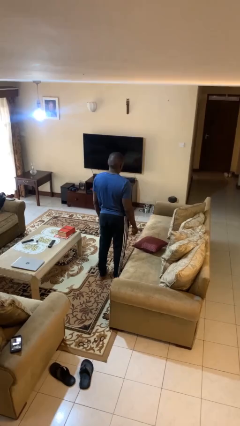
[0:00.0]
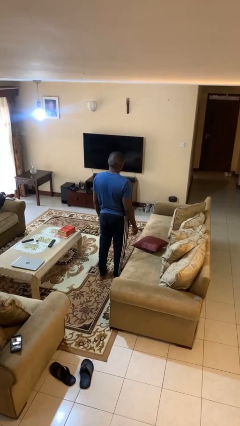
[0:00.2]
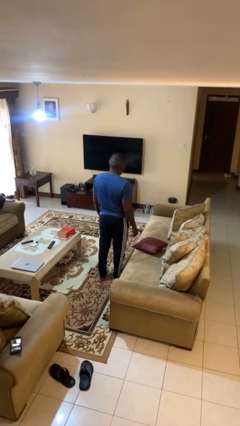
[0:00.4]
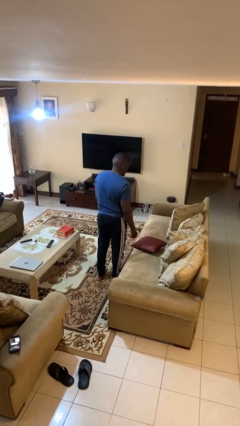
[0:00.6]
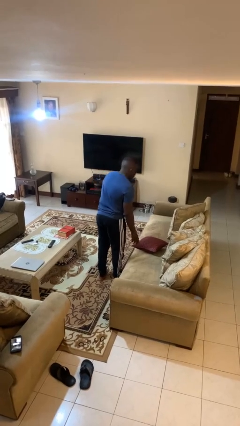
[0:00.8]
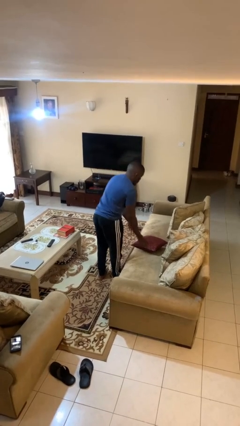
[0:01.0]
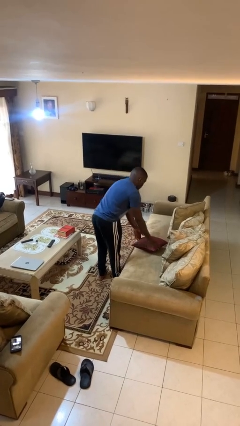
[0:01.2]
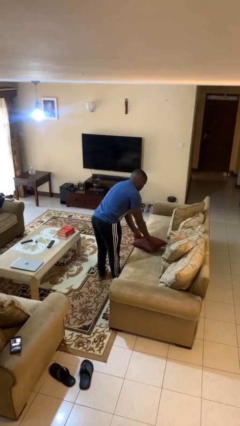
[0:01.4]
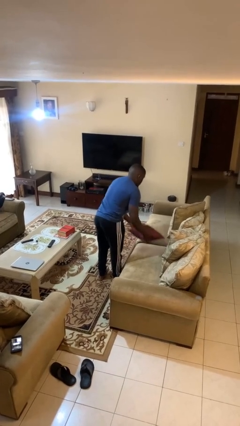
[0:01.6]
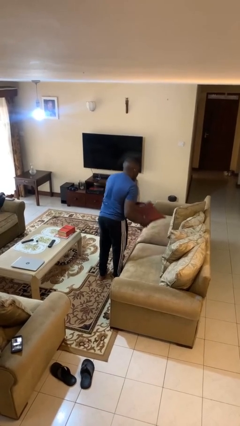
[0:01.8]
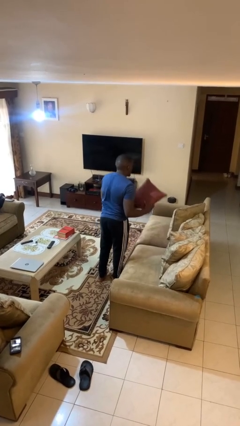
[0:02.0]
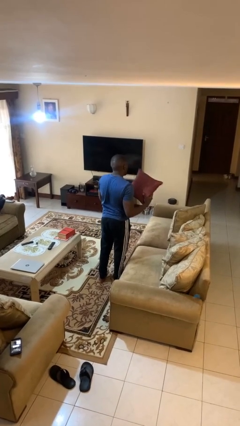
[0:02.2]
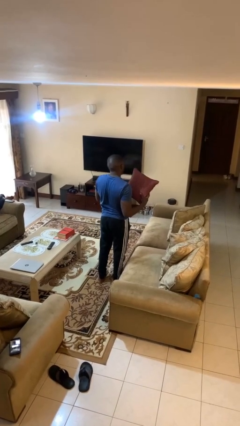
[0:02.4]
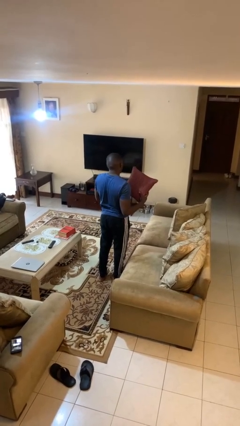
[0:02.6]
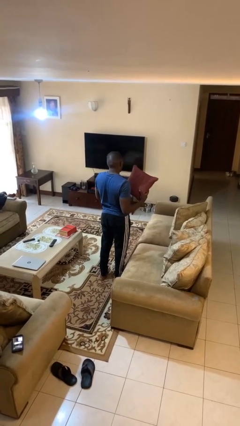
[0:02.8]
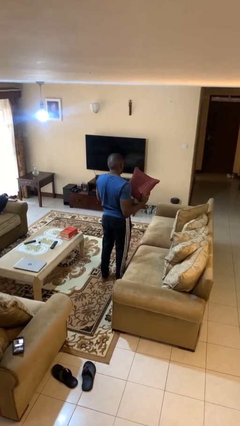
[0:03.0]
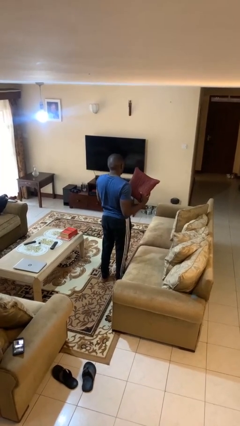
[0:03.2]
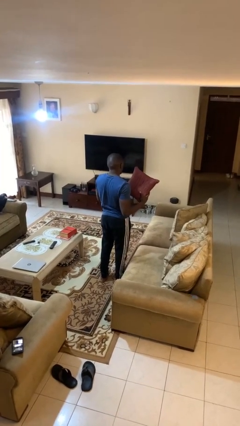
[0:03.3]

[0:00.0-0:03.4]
person picks up object from couch

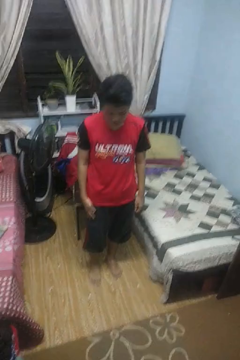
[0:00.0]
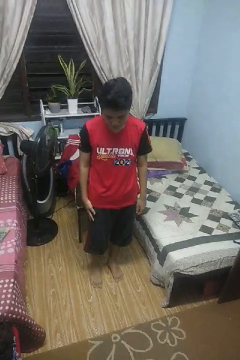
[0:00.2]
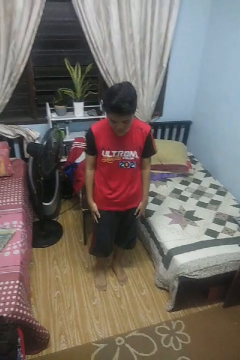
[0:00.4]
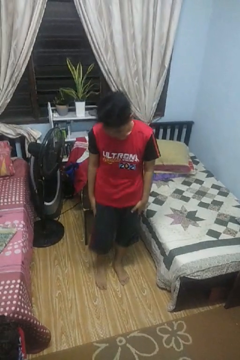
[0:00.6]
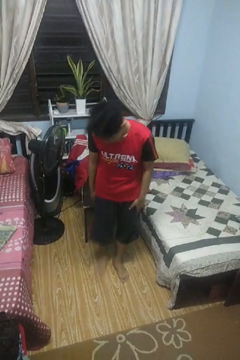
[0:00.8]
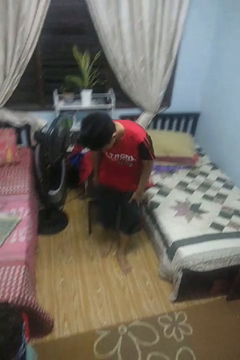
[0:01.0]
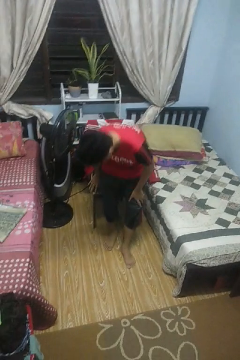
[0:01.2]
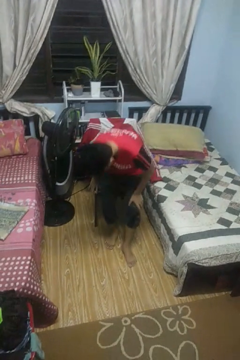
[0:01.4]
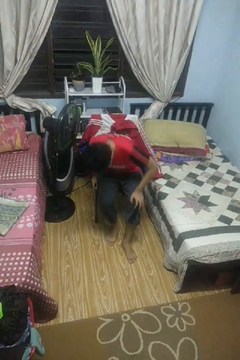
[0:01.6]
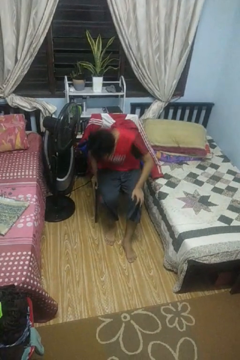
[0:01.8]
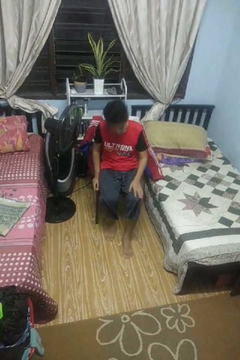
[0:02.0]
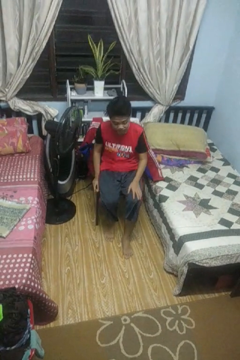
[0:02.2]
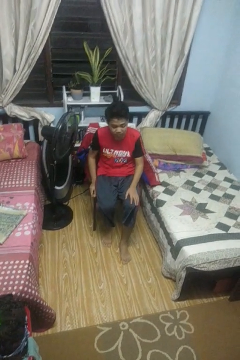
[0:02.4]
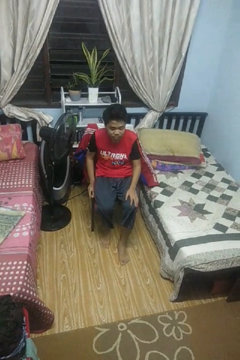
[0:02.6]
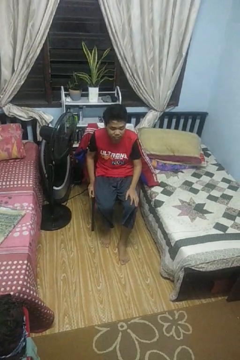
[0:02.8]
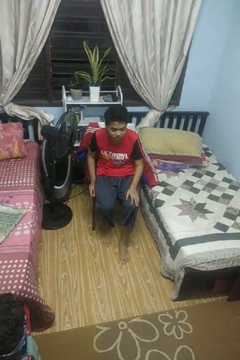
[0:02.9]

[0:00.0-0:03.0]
person sits down

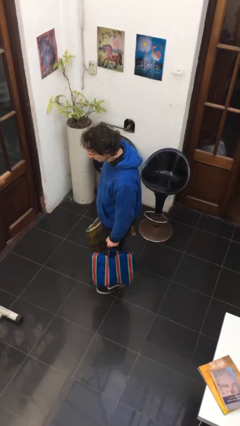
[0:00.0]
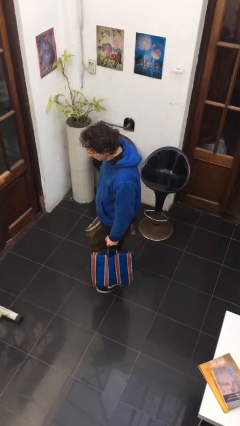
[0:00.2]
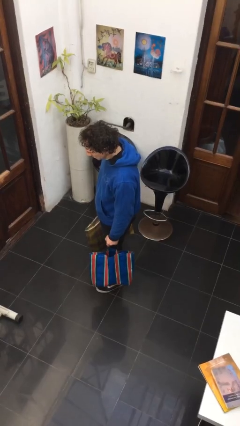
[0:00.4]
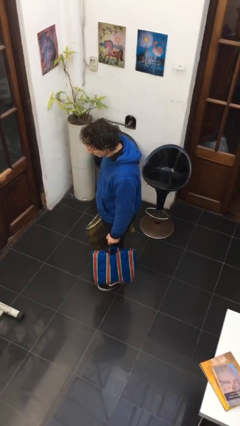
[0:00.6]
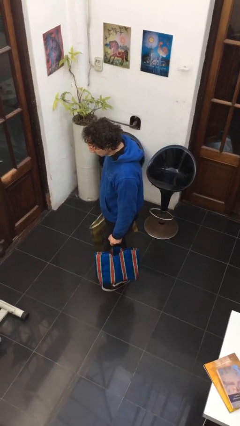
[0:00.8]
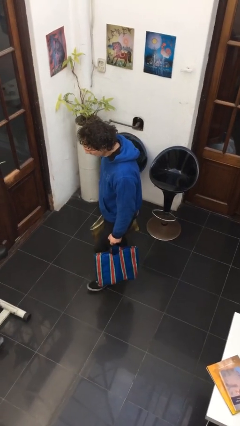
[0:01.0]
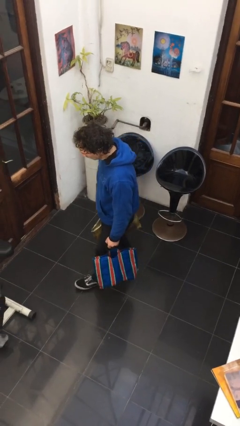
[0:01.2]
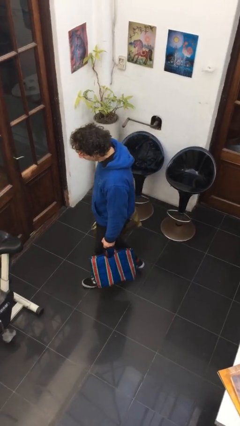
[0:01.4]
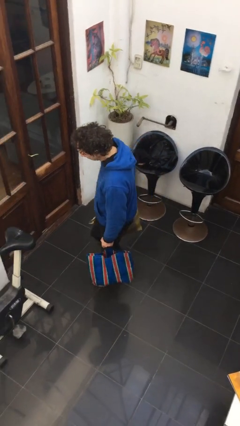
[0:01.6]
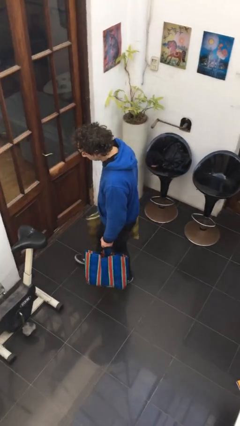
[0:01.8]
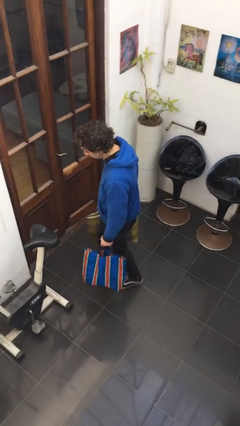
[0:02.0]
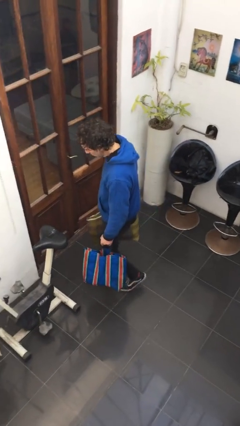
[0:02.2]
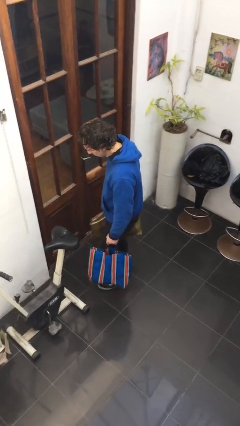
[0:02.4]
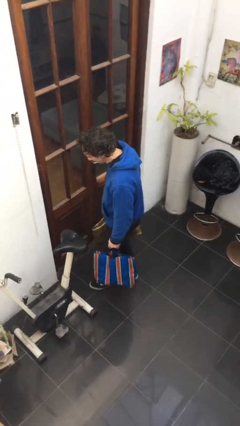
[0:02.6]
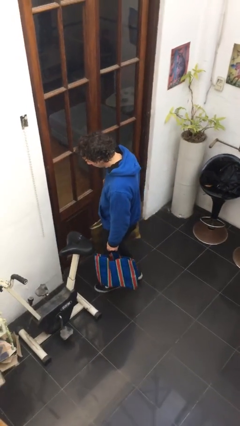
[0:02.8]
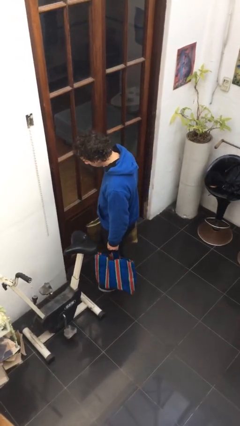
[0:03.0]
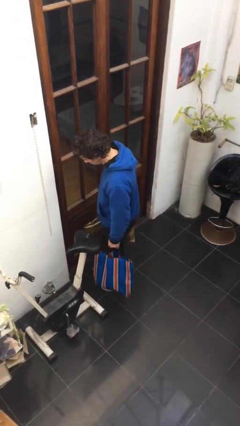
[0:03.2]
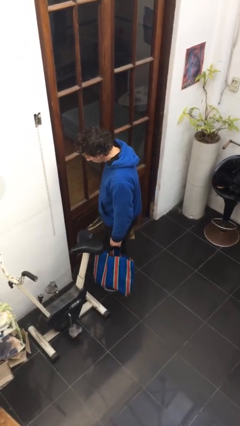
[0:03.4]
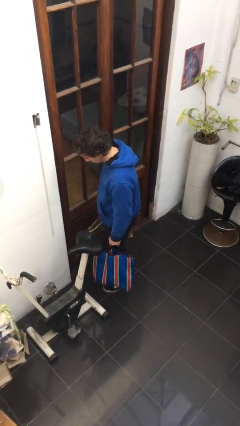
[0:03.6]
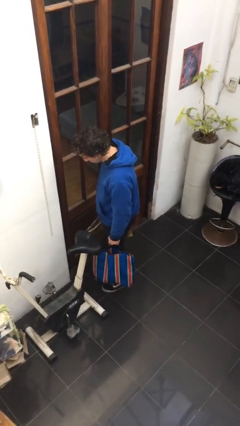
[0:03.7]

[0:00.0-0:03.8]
person carries groceries

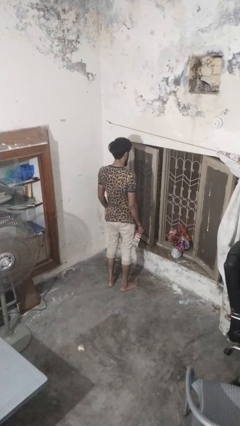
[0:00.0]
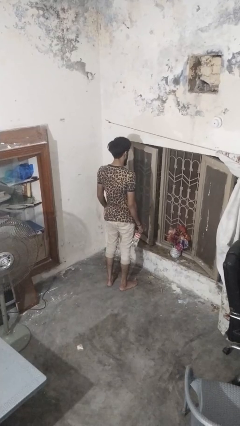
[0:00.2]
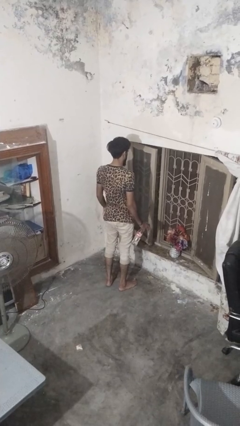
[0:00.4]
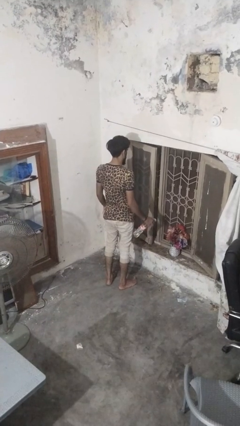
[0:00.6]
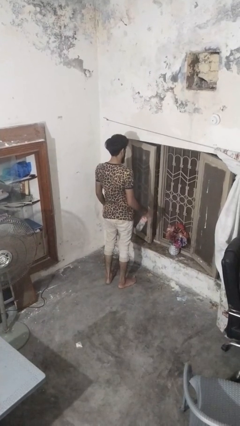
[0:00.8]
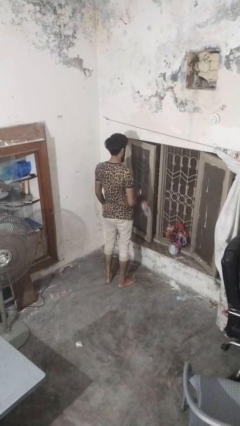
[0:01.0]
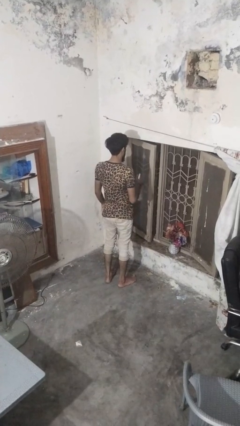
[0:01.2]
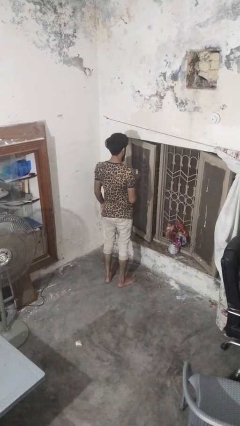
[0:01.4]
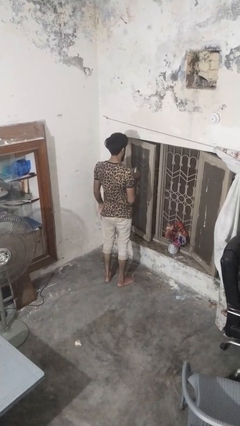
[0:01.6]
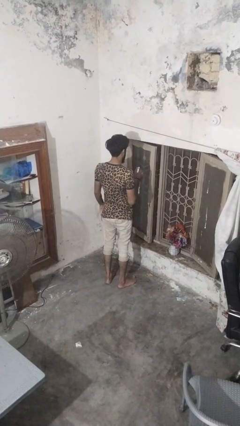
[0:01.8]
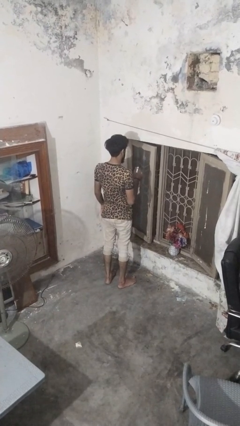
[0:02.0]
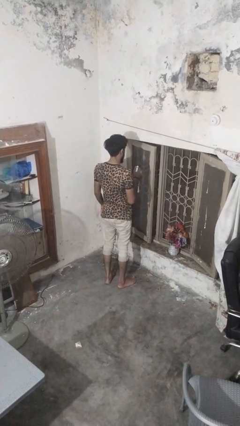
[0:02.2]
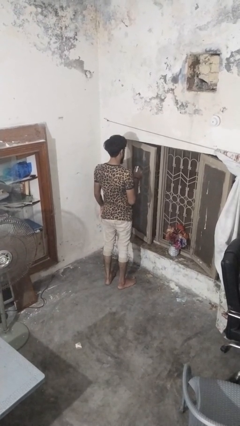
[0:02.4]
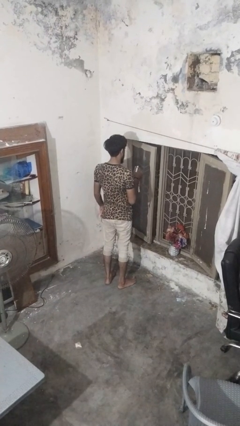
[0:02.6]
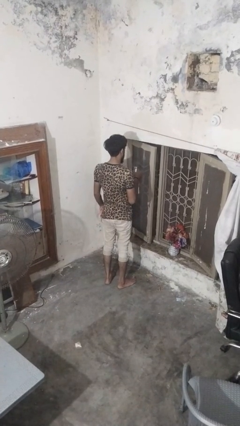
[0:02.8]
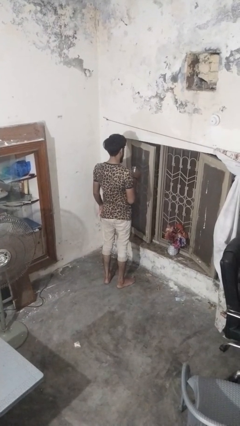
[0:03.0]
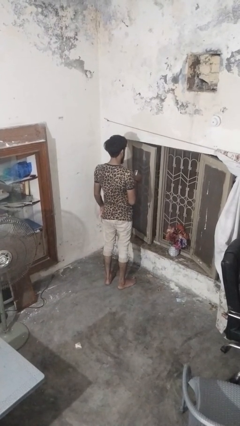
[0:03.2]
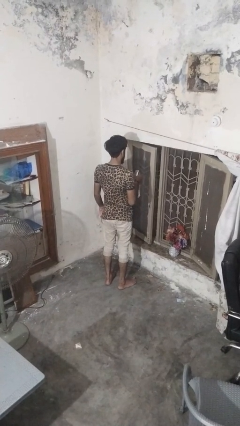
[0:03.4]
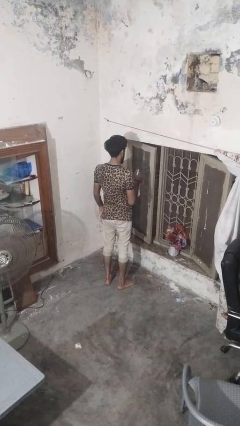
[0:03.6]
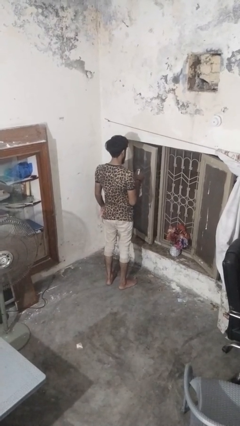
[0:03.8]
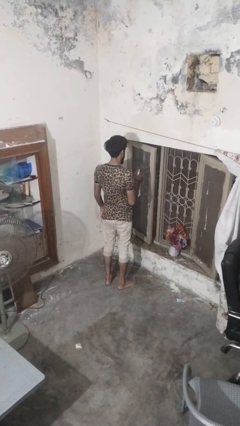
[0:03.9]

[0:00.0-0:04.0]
person sprays from bottle

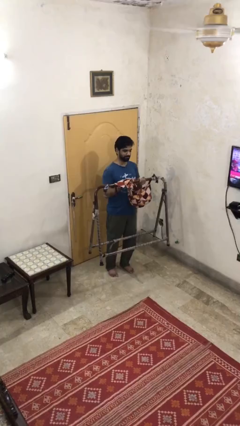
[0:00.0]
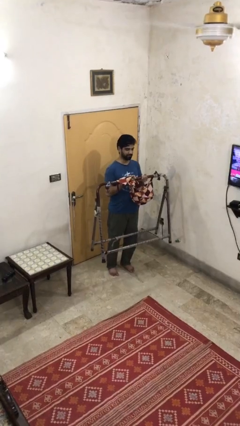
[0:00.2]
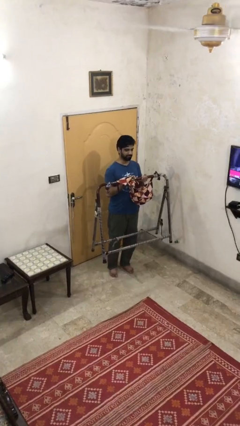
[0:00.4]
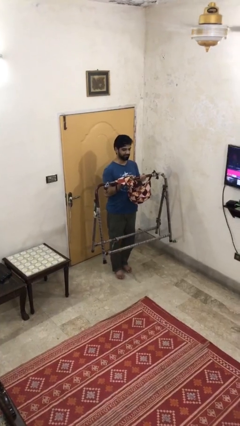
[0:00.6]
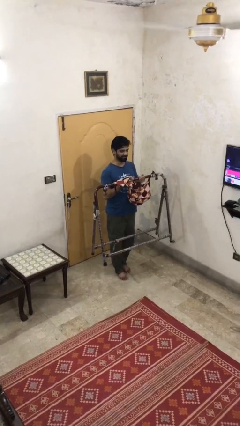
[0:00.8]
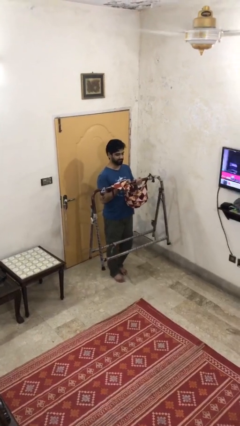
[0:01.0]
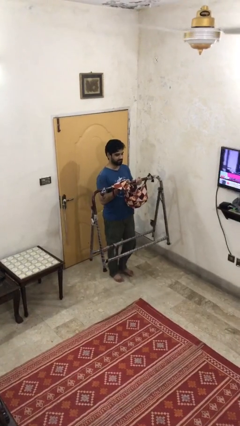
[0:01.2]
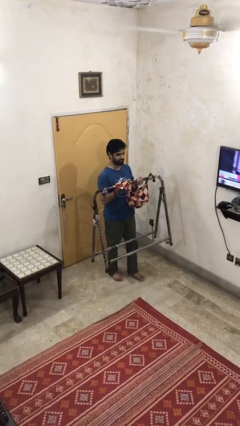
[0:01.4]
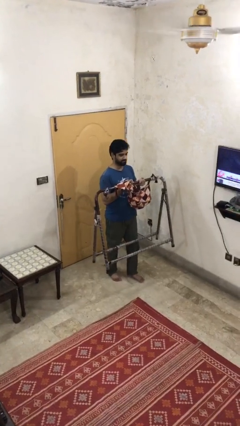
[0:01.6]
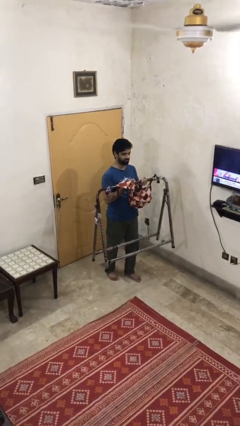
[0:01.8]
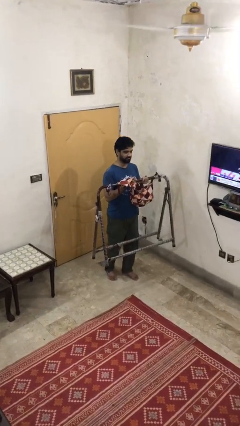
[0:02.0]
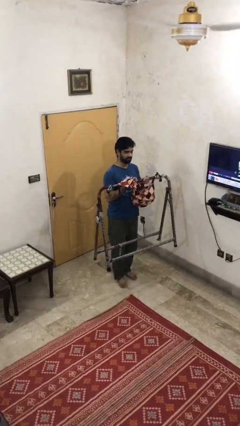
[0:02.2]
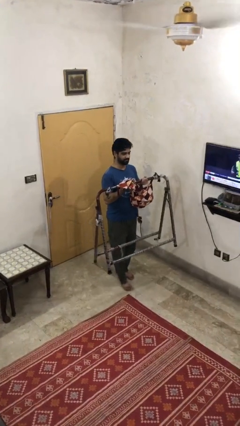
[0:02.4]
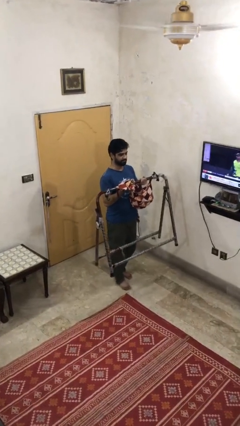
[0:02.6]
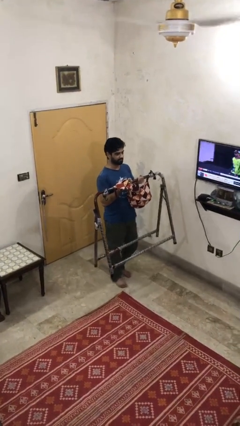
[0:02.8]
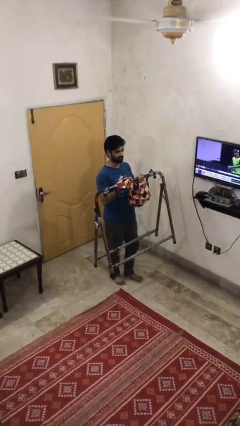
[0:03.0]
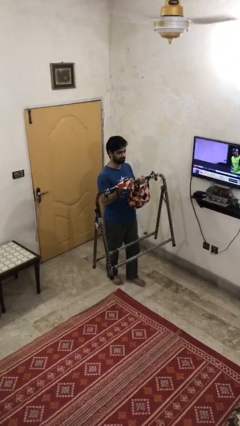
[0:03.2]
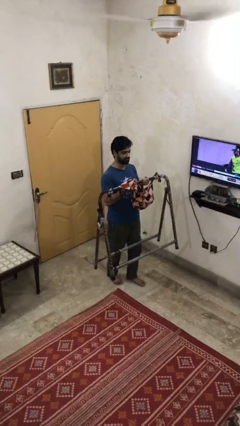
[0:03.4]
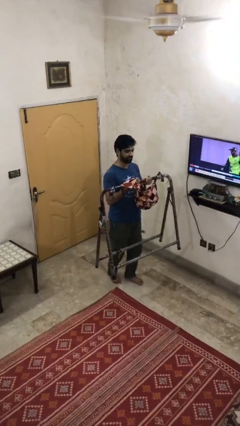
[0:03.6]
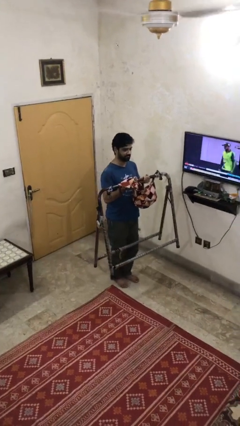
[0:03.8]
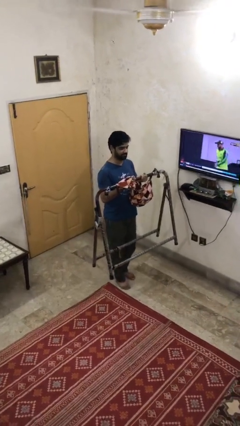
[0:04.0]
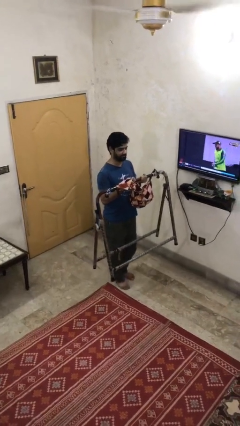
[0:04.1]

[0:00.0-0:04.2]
person carries heavy object

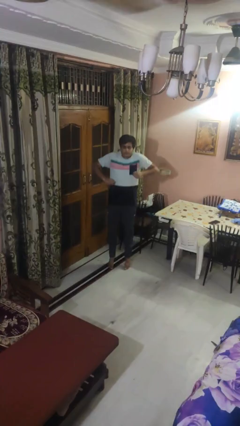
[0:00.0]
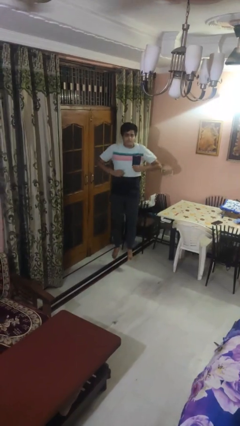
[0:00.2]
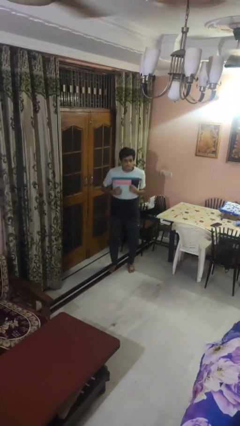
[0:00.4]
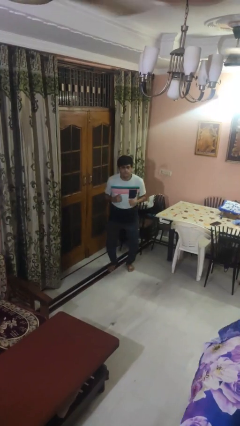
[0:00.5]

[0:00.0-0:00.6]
person jumps
